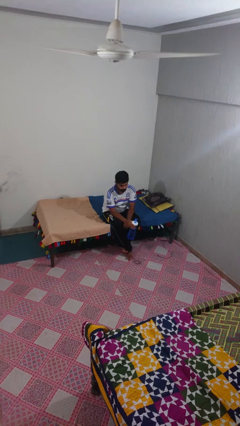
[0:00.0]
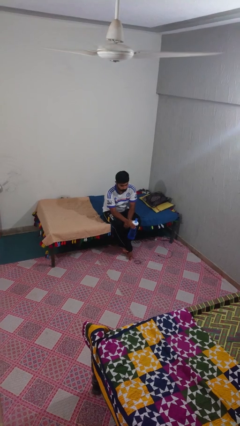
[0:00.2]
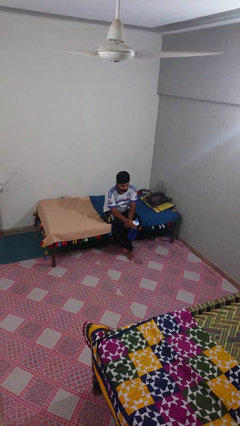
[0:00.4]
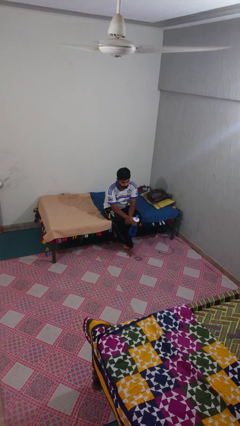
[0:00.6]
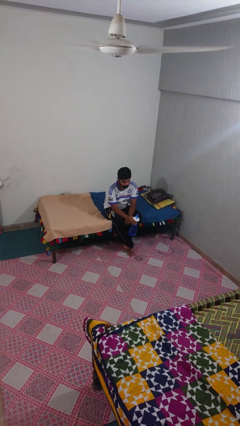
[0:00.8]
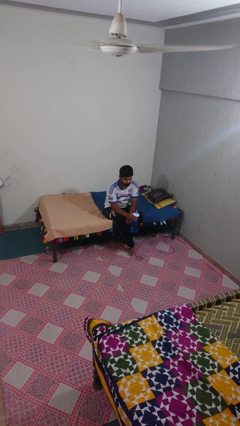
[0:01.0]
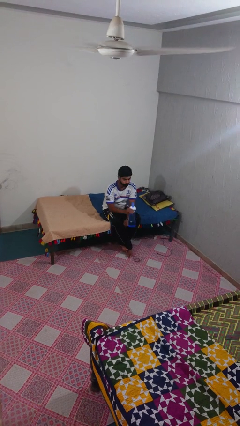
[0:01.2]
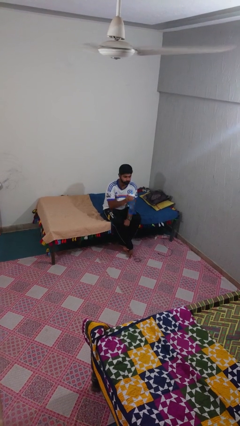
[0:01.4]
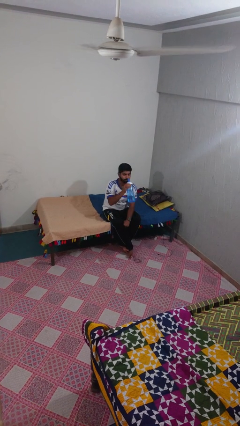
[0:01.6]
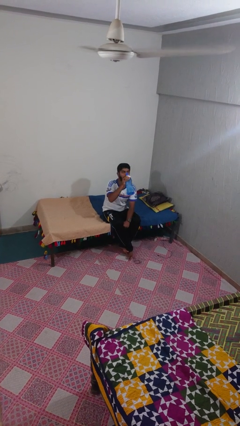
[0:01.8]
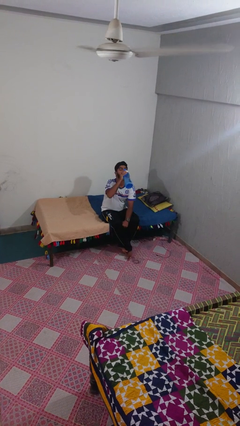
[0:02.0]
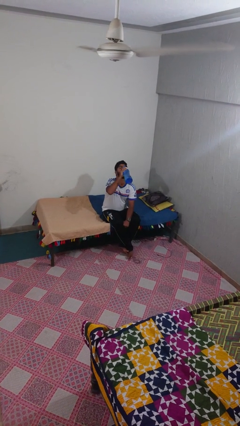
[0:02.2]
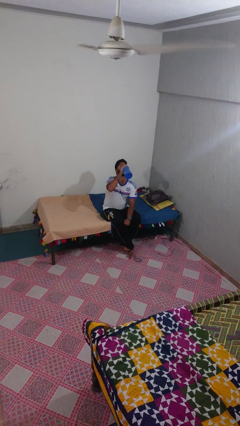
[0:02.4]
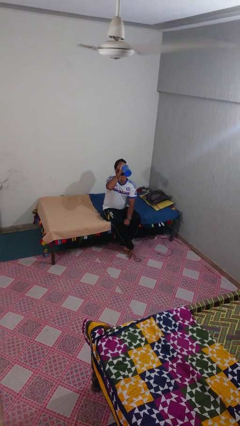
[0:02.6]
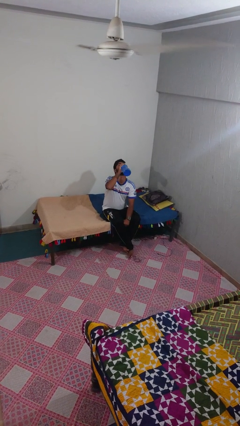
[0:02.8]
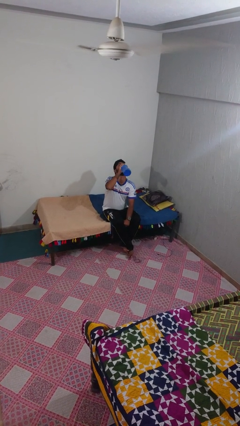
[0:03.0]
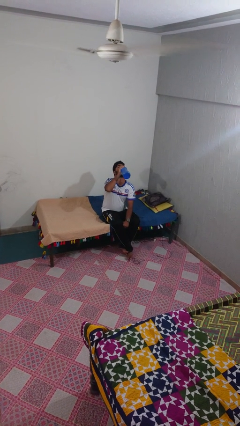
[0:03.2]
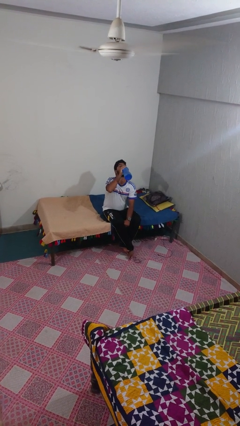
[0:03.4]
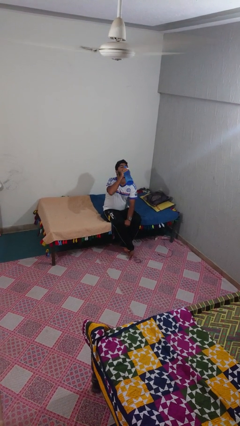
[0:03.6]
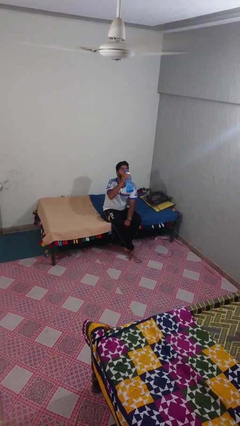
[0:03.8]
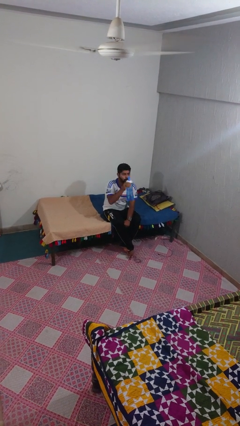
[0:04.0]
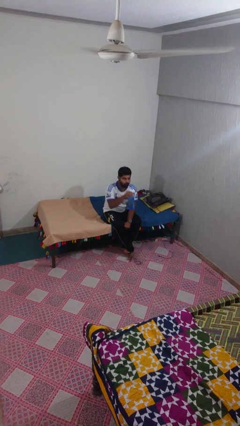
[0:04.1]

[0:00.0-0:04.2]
person drinks from bottle

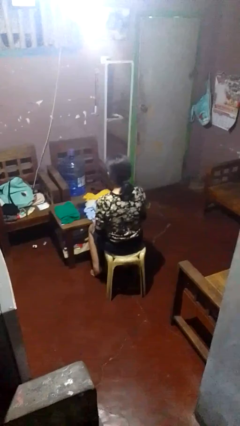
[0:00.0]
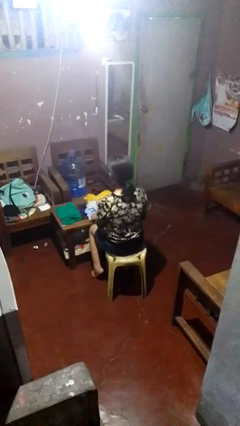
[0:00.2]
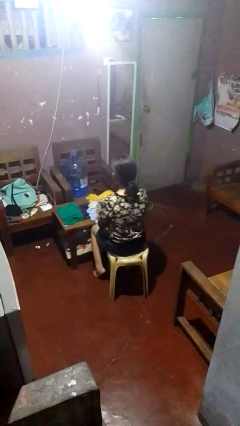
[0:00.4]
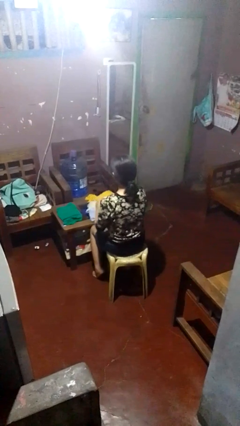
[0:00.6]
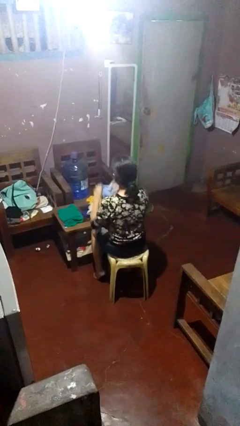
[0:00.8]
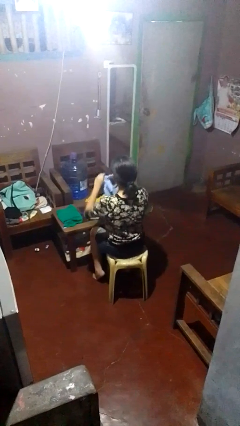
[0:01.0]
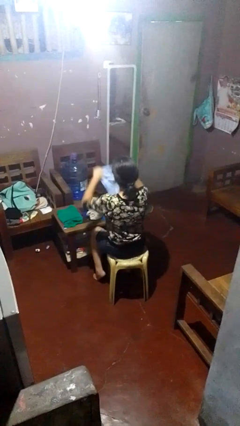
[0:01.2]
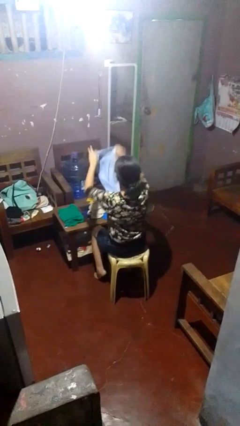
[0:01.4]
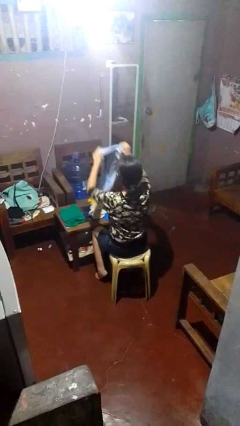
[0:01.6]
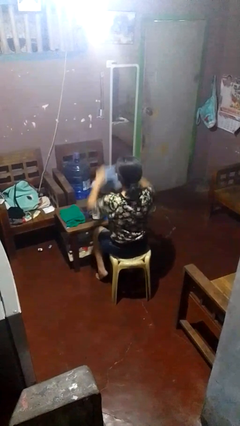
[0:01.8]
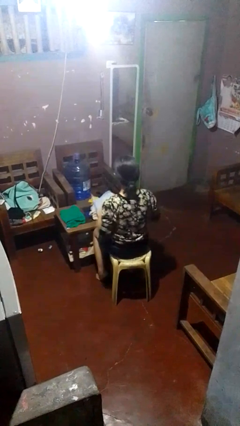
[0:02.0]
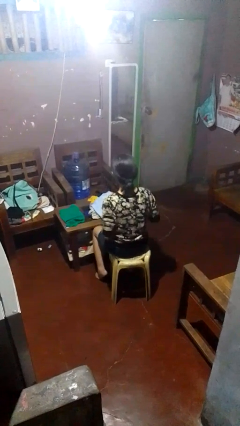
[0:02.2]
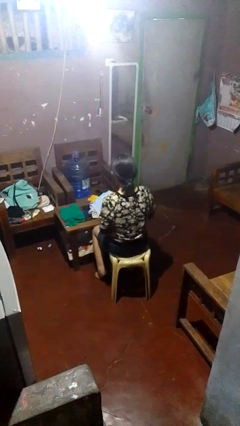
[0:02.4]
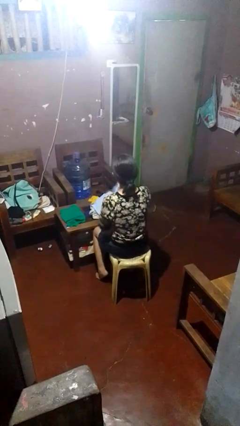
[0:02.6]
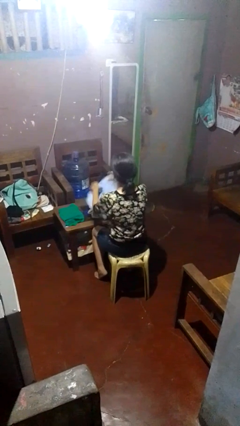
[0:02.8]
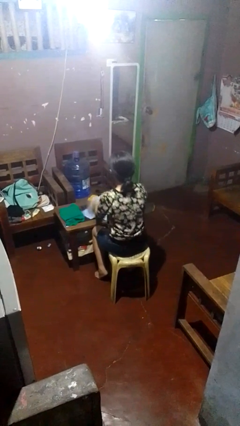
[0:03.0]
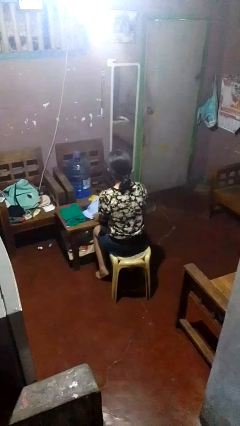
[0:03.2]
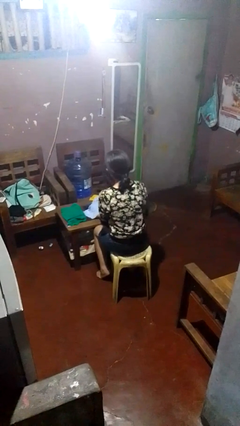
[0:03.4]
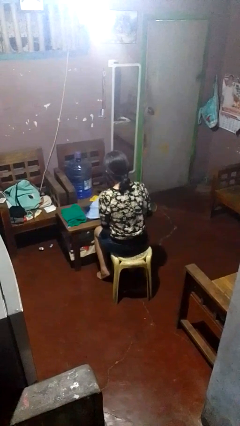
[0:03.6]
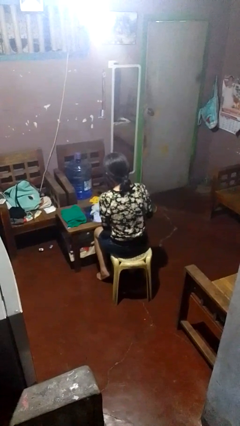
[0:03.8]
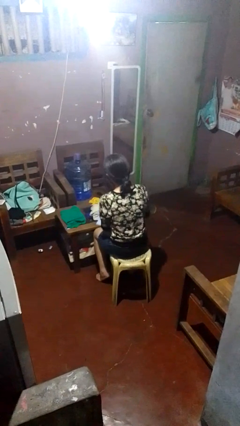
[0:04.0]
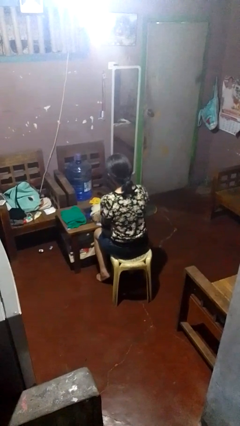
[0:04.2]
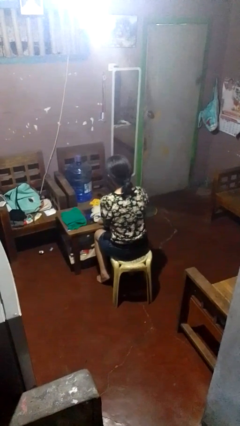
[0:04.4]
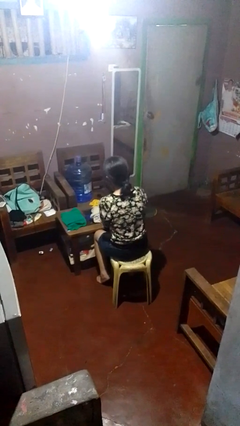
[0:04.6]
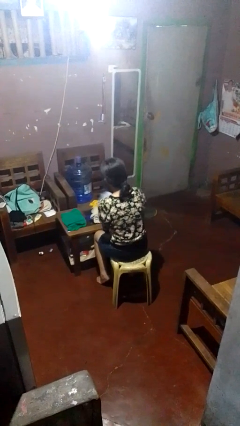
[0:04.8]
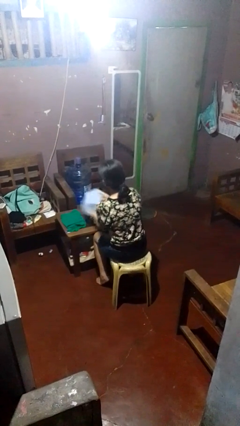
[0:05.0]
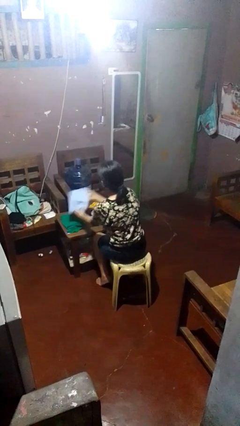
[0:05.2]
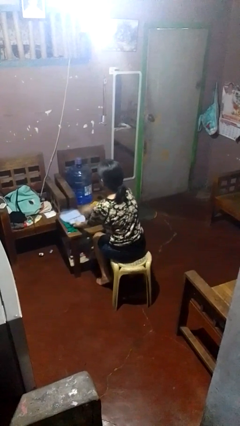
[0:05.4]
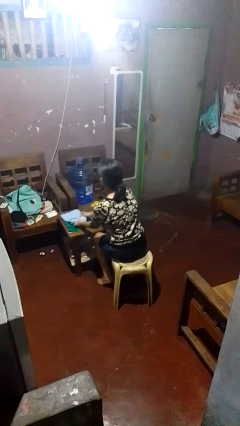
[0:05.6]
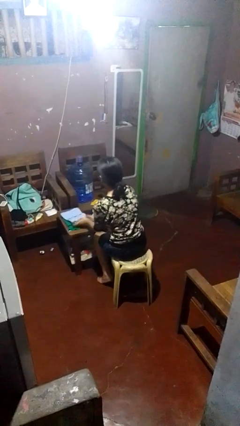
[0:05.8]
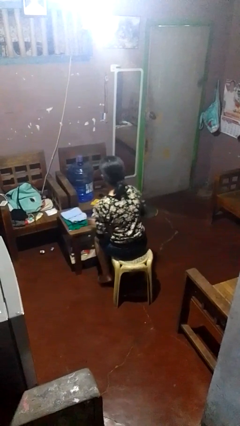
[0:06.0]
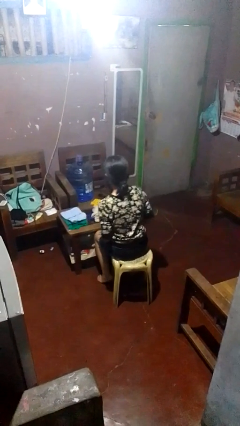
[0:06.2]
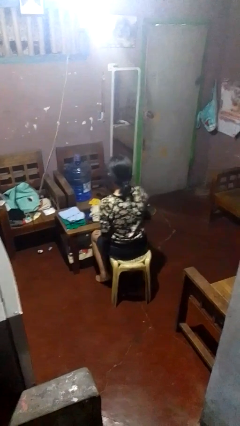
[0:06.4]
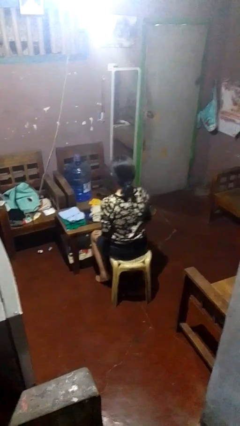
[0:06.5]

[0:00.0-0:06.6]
person folds shirt

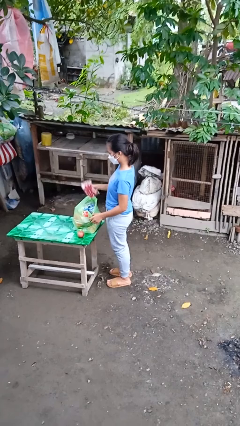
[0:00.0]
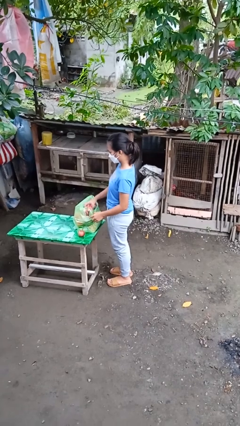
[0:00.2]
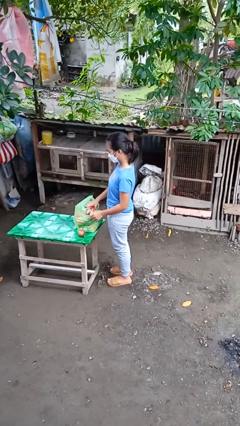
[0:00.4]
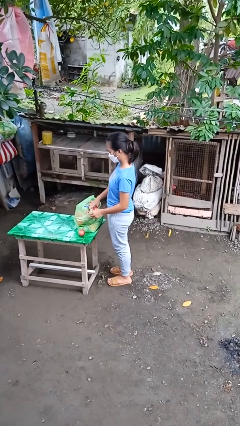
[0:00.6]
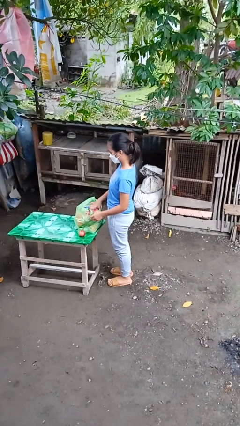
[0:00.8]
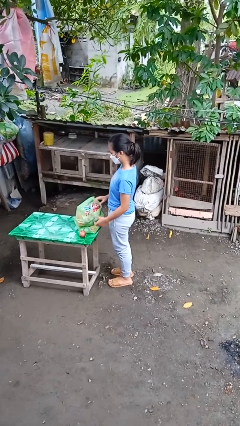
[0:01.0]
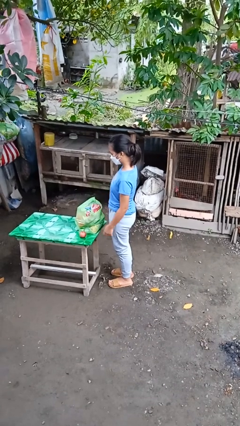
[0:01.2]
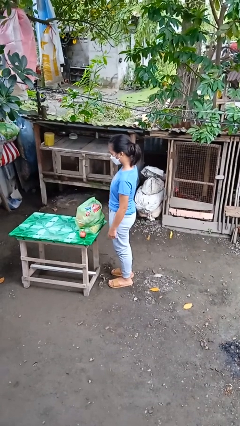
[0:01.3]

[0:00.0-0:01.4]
person puts object into bag

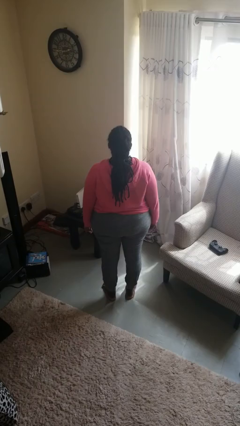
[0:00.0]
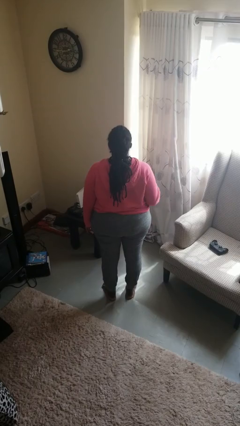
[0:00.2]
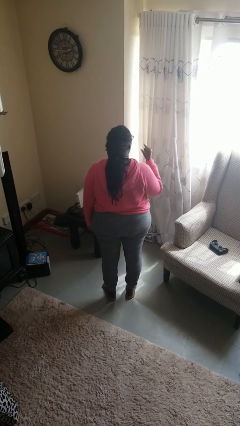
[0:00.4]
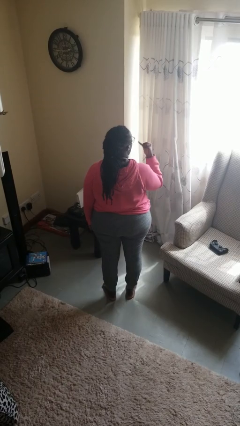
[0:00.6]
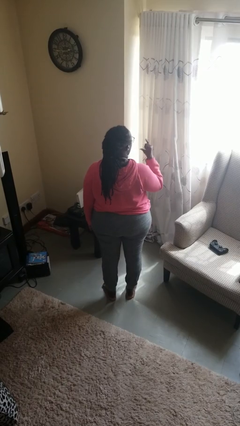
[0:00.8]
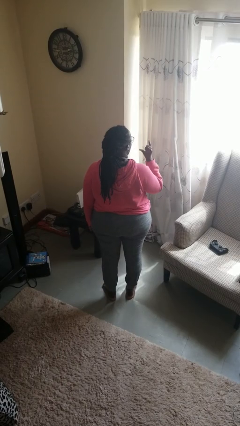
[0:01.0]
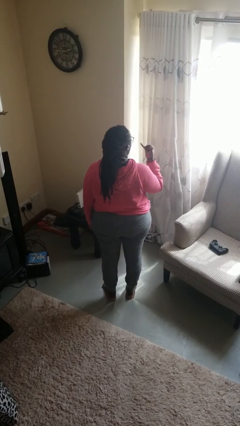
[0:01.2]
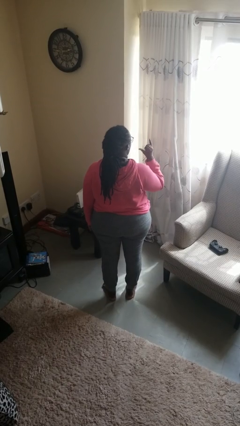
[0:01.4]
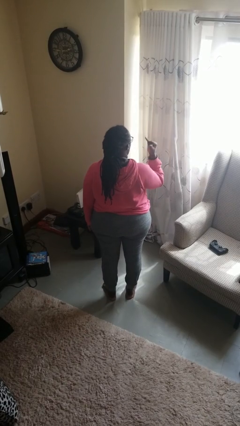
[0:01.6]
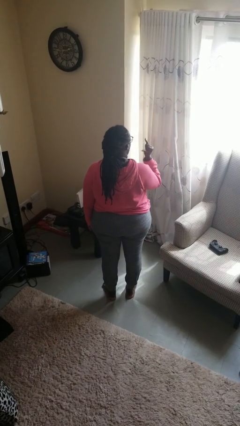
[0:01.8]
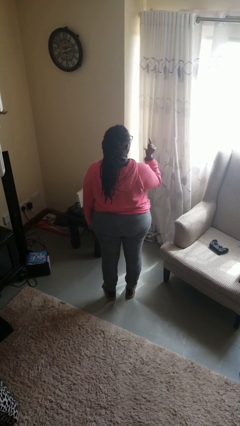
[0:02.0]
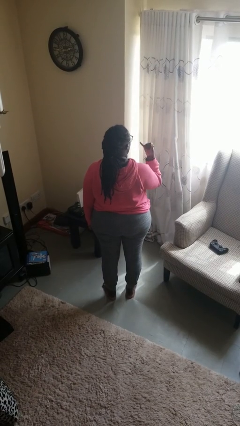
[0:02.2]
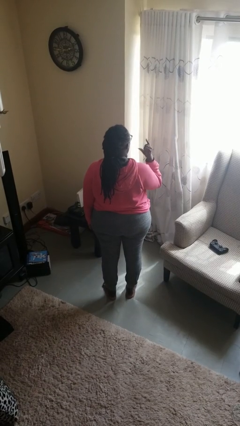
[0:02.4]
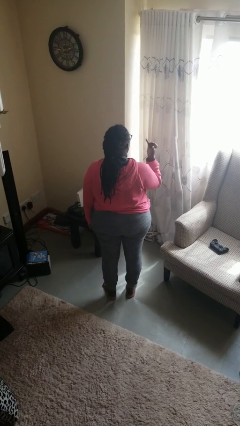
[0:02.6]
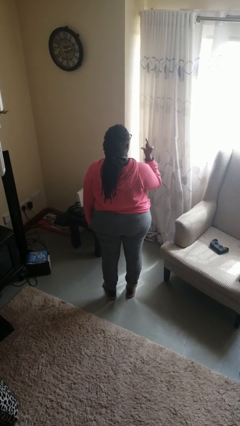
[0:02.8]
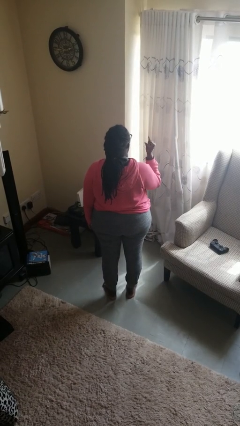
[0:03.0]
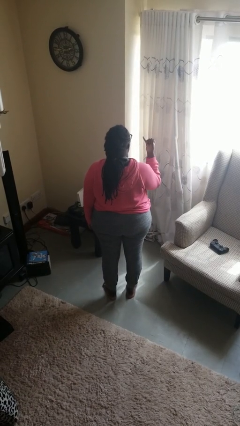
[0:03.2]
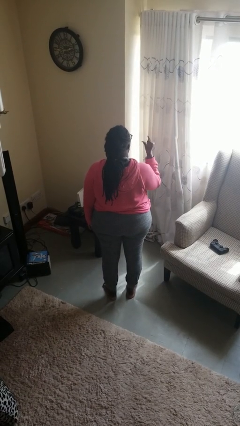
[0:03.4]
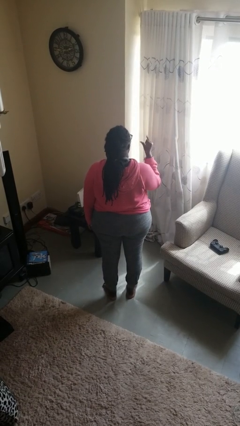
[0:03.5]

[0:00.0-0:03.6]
person gestures hang loose

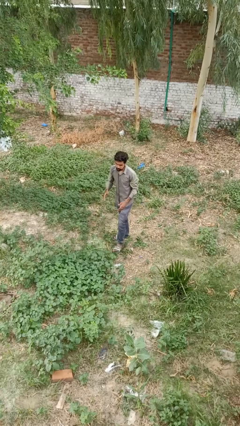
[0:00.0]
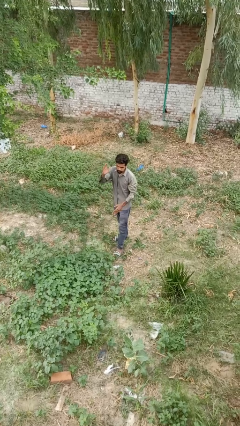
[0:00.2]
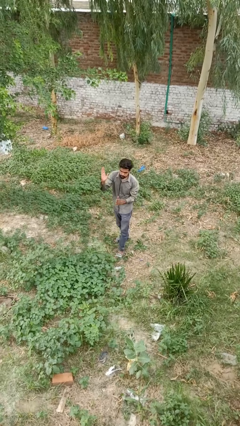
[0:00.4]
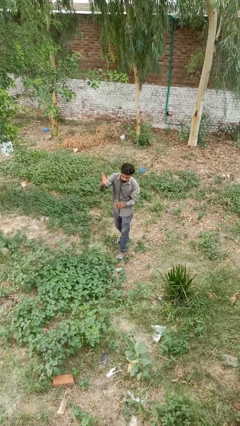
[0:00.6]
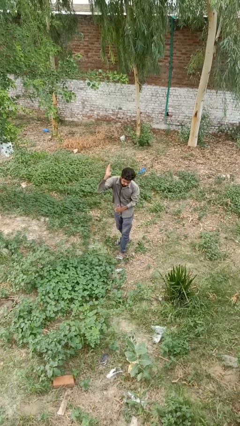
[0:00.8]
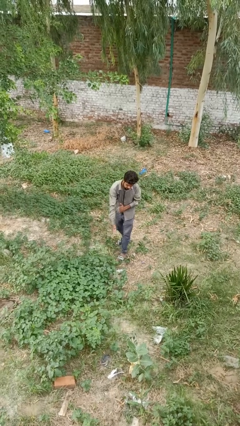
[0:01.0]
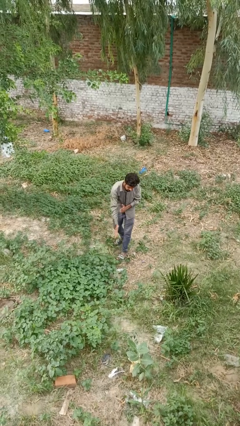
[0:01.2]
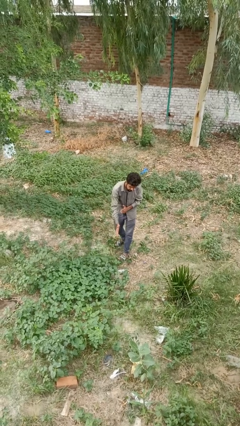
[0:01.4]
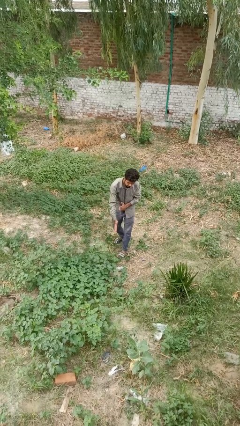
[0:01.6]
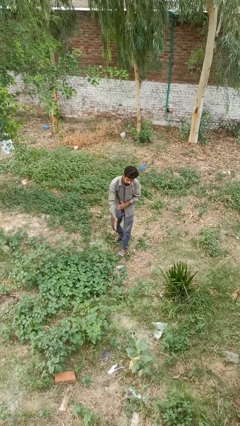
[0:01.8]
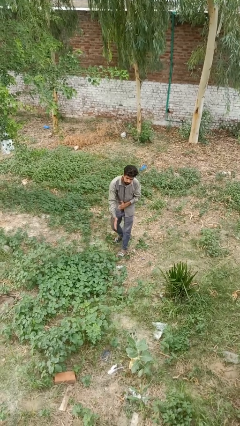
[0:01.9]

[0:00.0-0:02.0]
person karate chop
